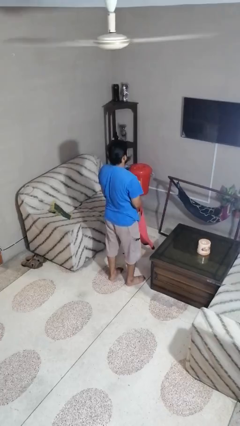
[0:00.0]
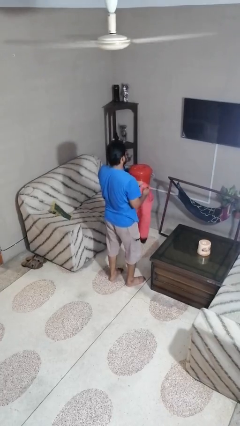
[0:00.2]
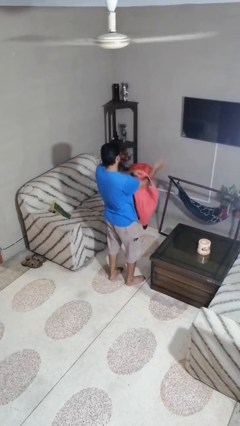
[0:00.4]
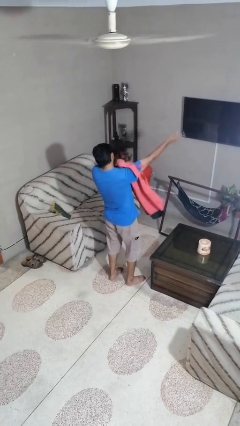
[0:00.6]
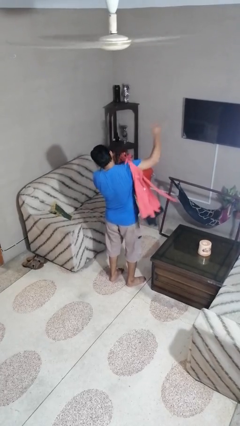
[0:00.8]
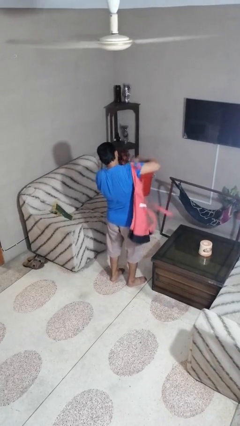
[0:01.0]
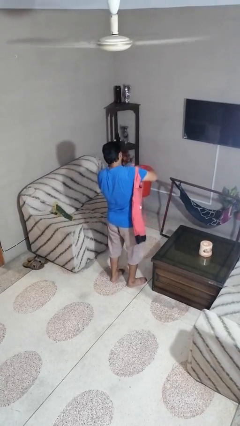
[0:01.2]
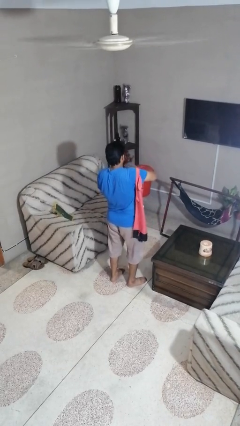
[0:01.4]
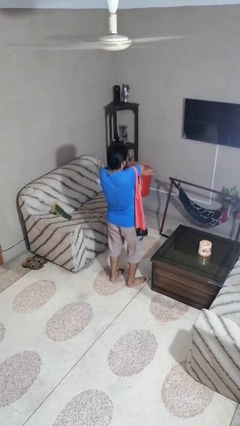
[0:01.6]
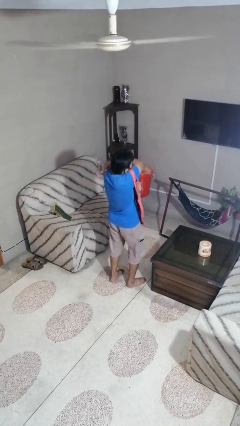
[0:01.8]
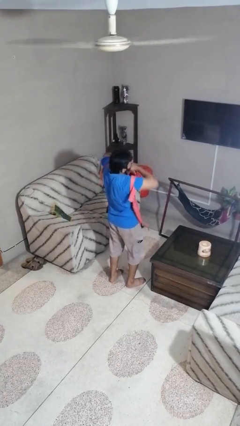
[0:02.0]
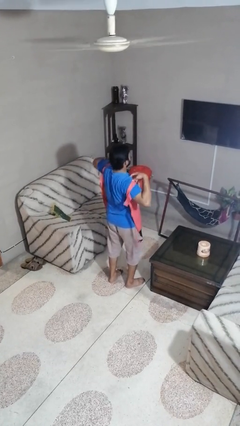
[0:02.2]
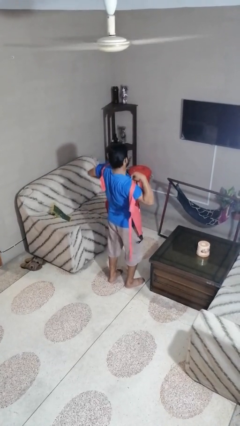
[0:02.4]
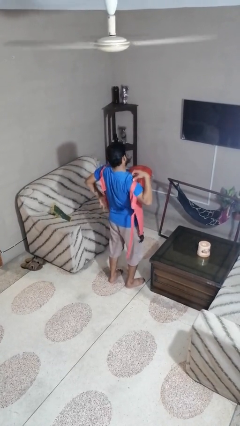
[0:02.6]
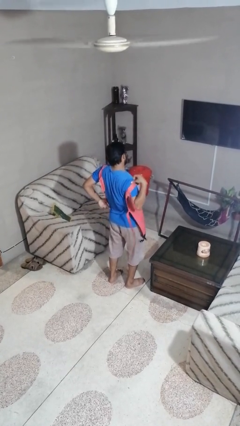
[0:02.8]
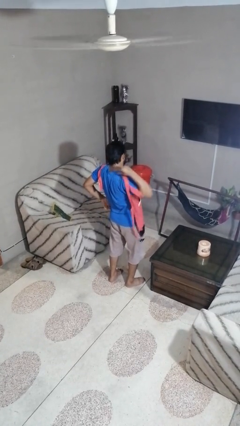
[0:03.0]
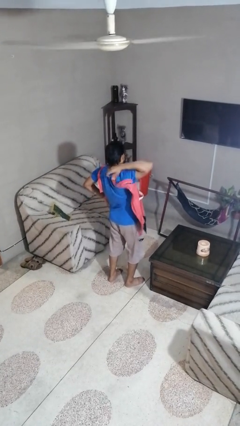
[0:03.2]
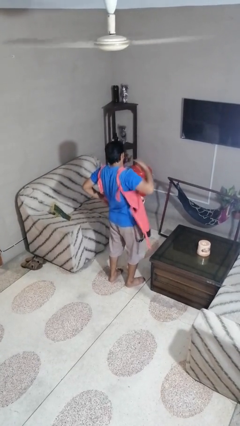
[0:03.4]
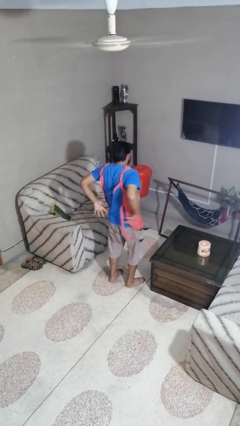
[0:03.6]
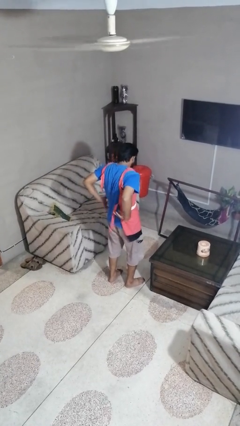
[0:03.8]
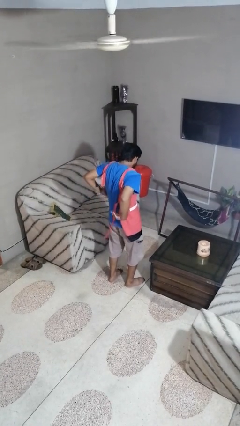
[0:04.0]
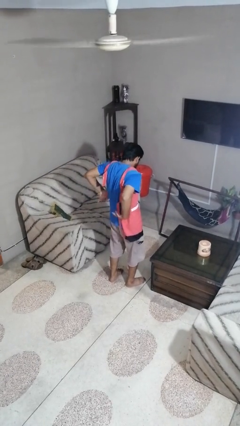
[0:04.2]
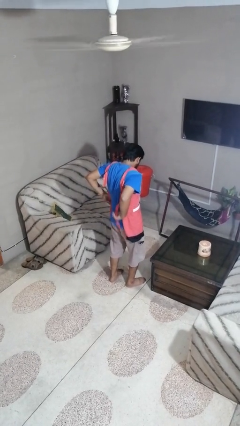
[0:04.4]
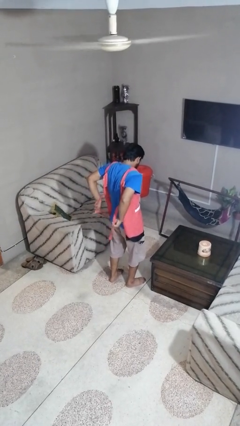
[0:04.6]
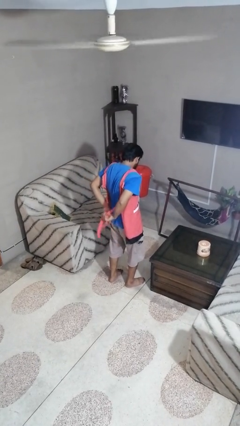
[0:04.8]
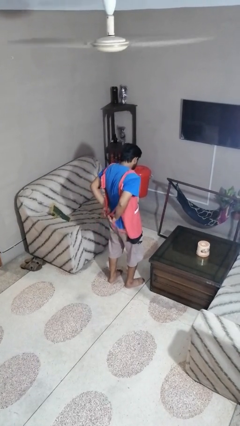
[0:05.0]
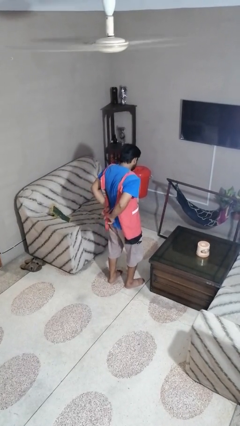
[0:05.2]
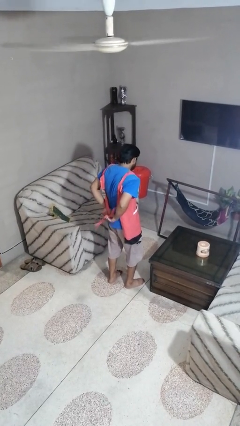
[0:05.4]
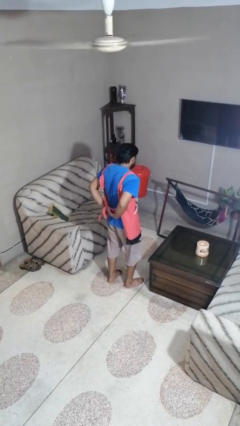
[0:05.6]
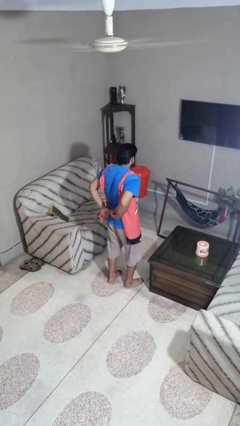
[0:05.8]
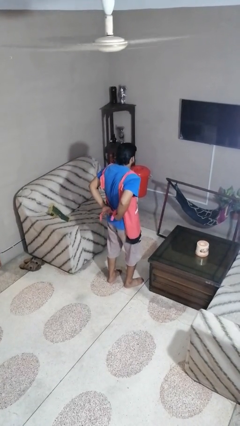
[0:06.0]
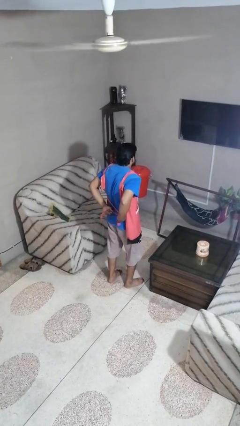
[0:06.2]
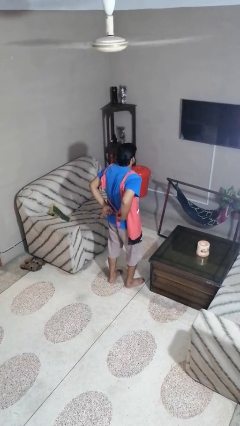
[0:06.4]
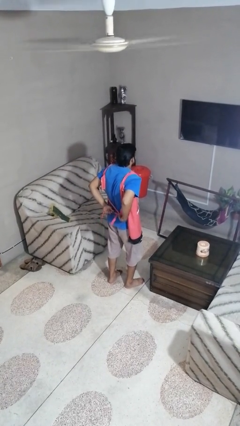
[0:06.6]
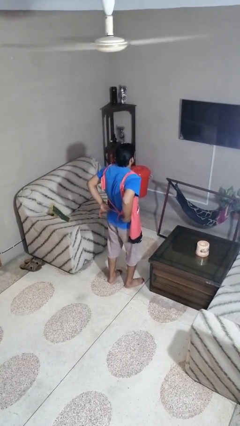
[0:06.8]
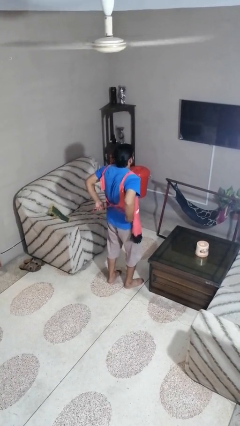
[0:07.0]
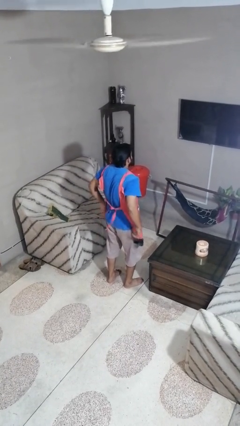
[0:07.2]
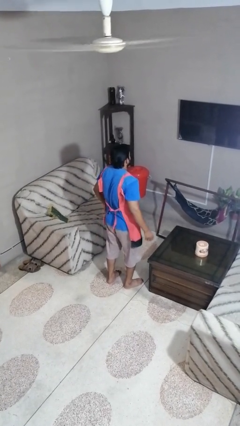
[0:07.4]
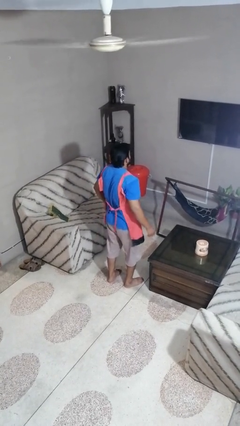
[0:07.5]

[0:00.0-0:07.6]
person puts on apron

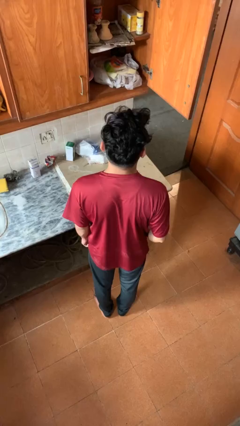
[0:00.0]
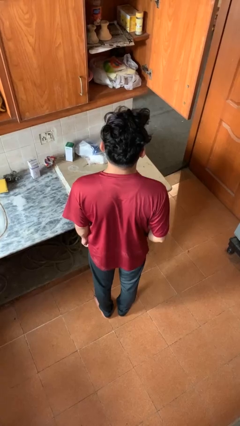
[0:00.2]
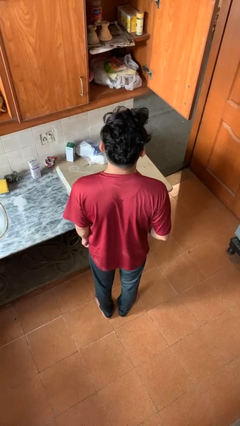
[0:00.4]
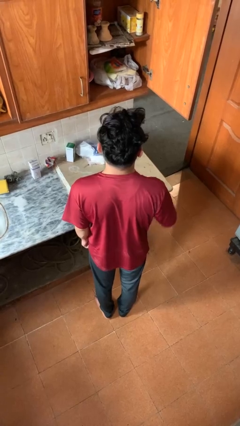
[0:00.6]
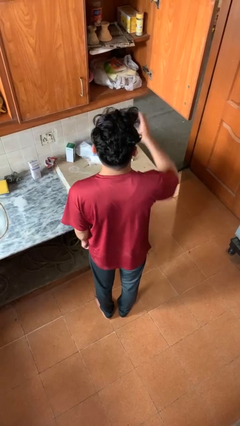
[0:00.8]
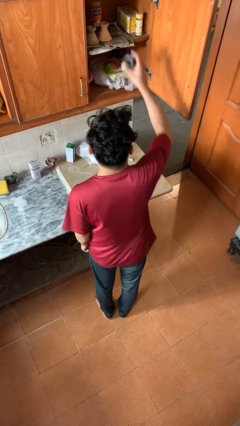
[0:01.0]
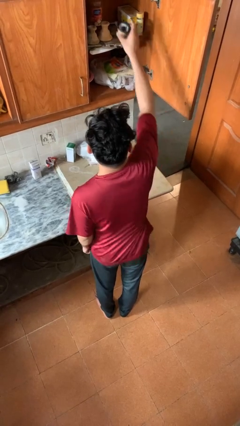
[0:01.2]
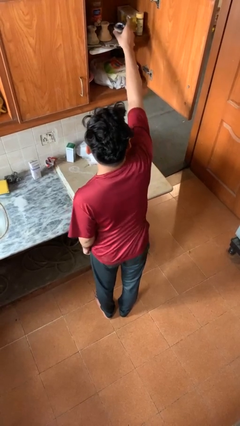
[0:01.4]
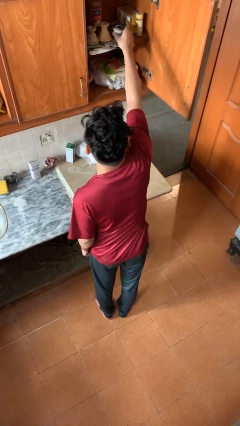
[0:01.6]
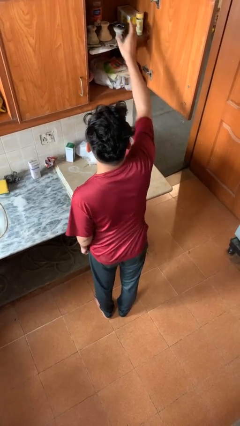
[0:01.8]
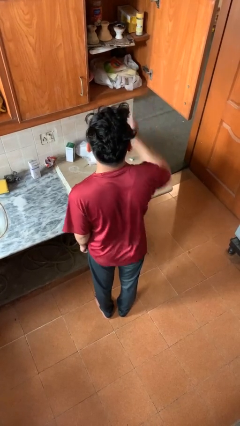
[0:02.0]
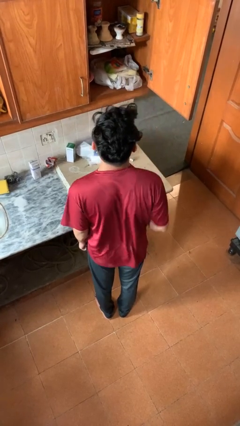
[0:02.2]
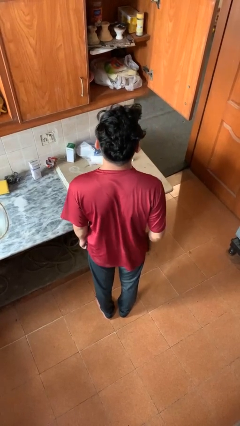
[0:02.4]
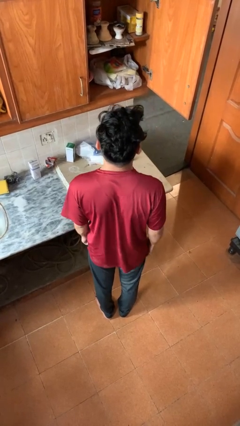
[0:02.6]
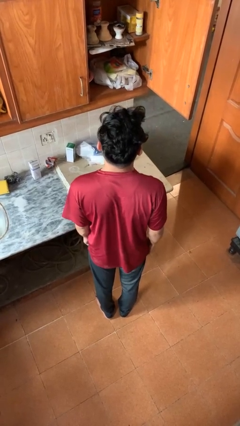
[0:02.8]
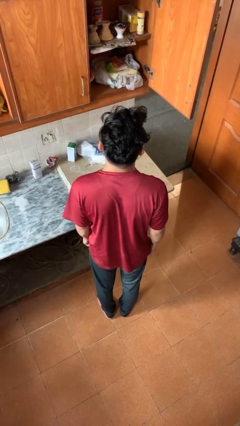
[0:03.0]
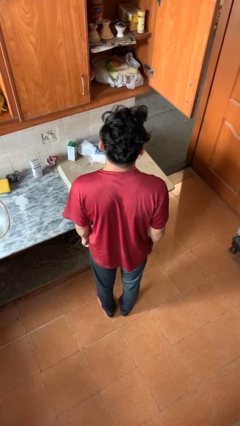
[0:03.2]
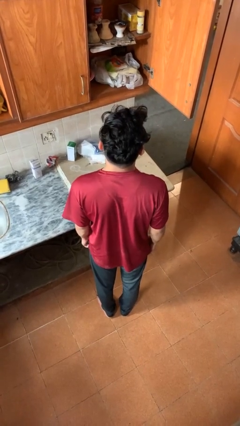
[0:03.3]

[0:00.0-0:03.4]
person puts object in cabinet

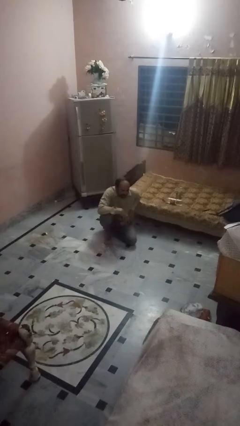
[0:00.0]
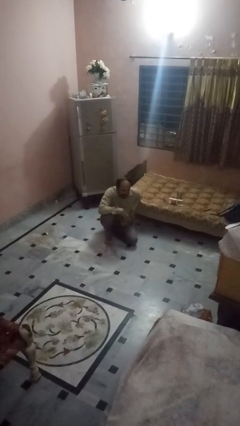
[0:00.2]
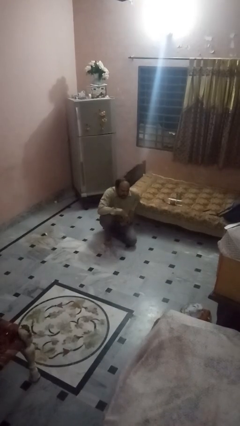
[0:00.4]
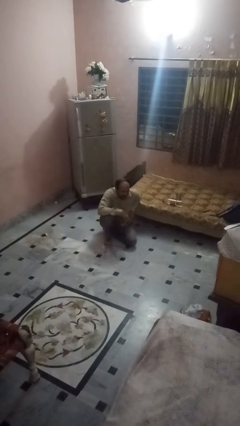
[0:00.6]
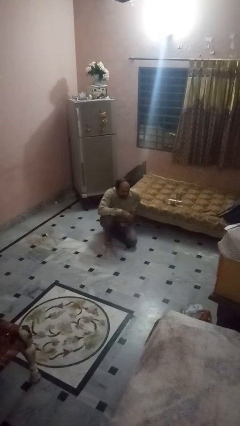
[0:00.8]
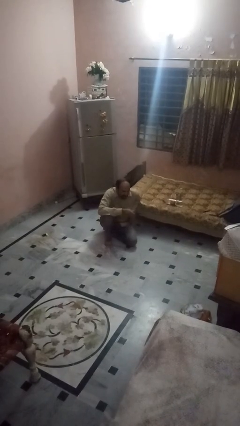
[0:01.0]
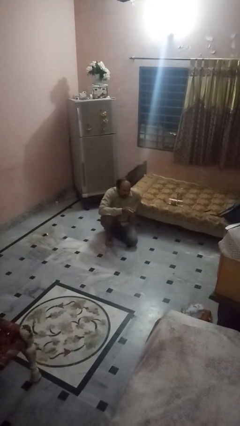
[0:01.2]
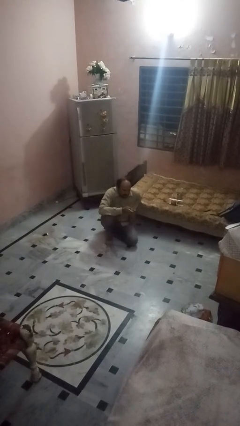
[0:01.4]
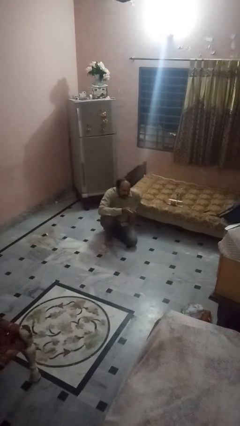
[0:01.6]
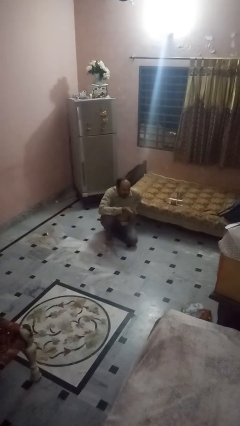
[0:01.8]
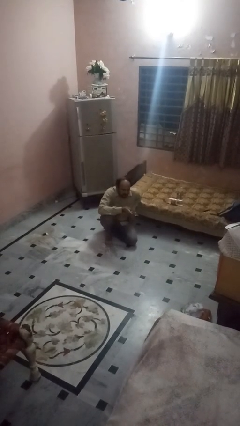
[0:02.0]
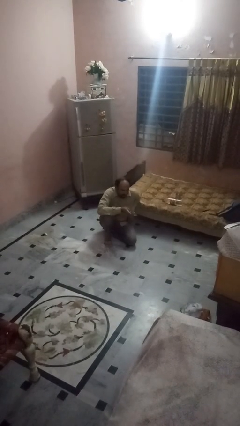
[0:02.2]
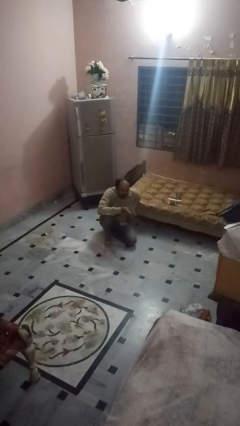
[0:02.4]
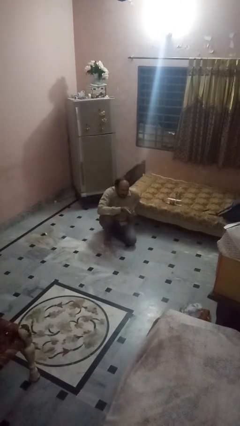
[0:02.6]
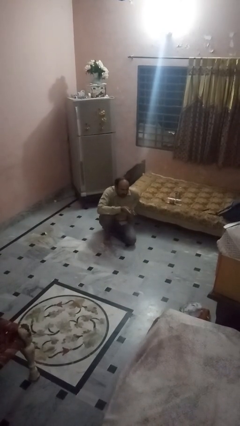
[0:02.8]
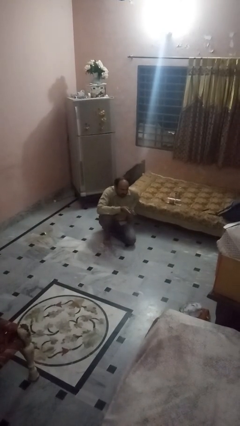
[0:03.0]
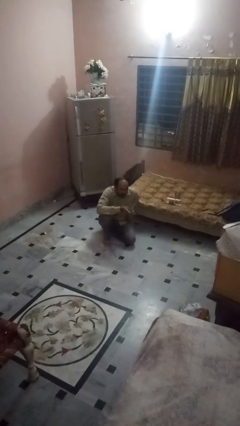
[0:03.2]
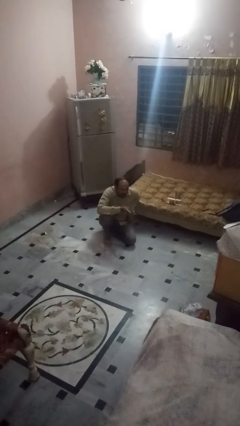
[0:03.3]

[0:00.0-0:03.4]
person uses television remote

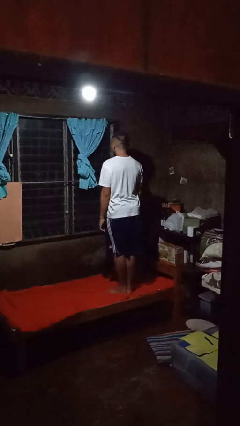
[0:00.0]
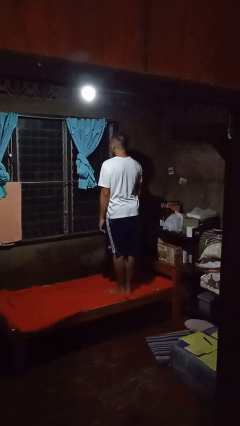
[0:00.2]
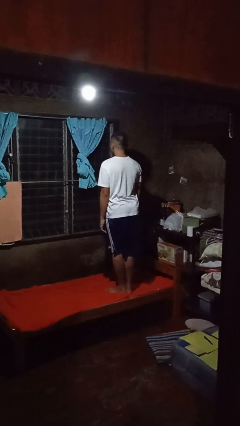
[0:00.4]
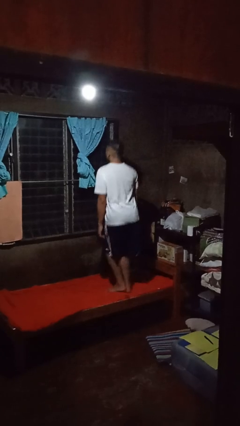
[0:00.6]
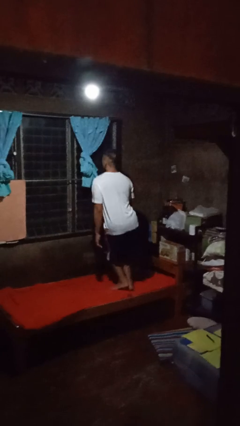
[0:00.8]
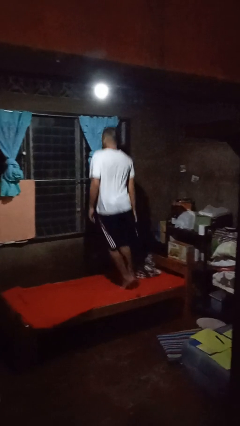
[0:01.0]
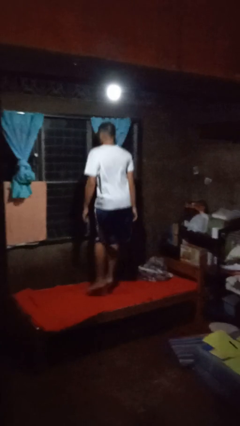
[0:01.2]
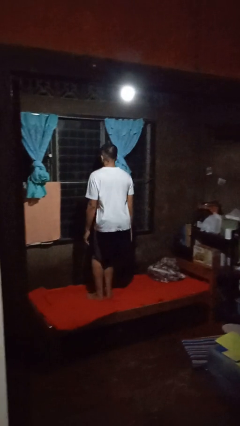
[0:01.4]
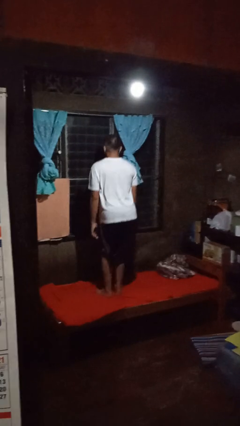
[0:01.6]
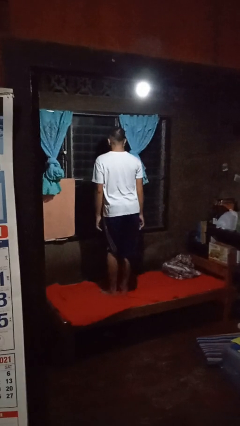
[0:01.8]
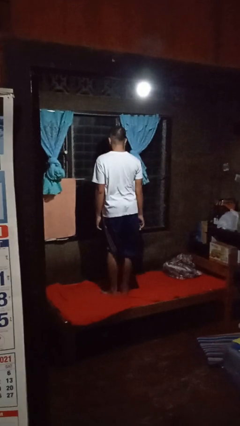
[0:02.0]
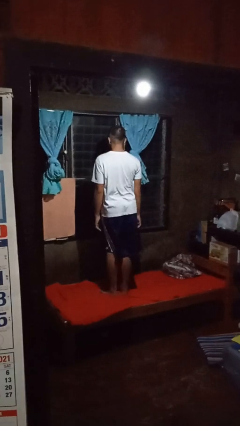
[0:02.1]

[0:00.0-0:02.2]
person jumps on bed

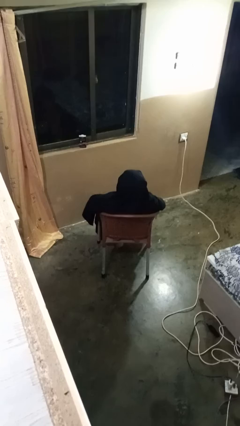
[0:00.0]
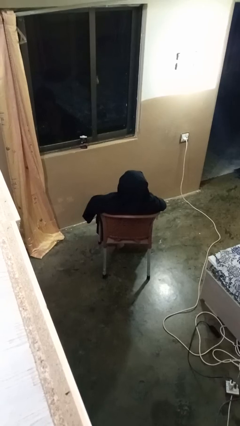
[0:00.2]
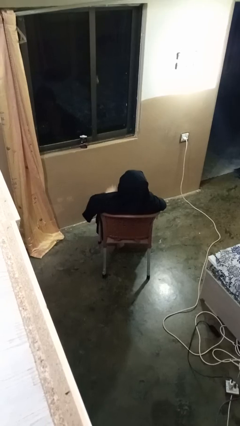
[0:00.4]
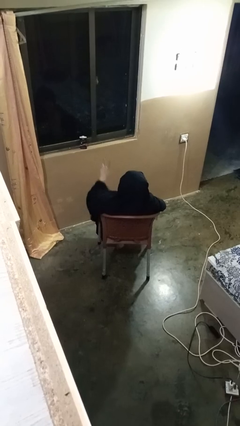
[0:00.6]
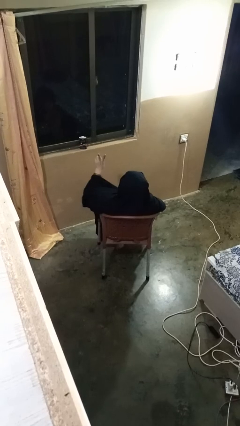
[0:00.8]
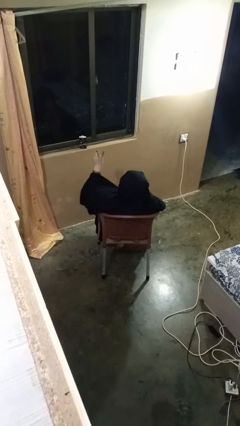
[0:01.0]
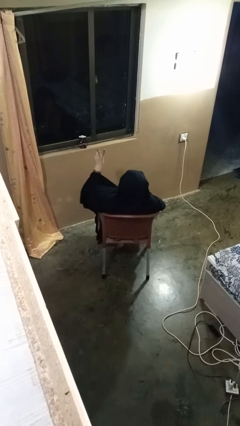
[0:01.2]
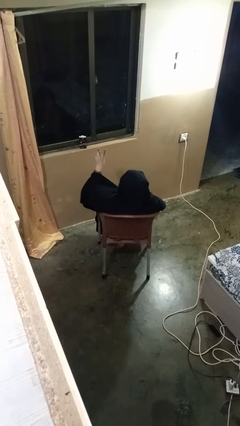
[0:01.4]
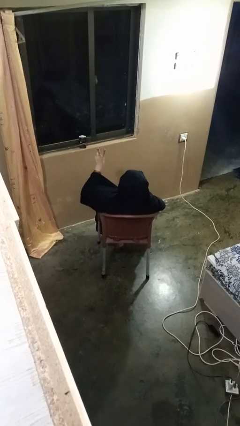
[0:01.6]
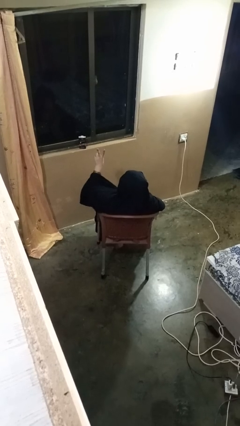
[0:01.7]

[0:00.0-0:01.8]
person gestures peace
